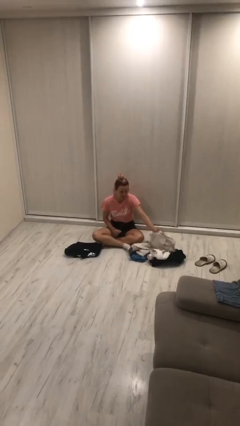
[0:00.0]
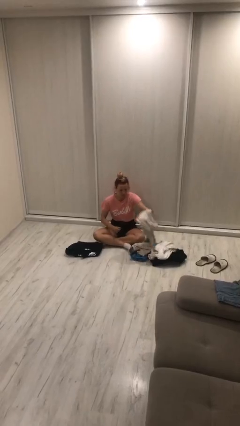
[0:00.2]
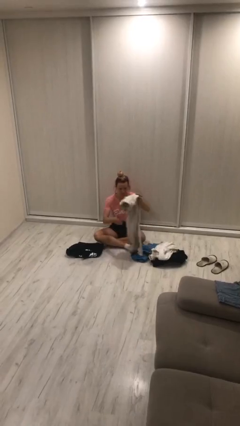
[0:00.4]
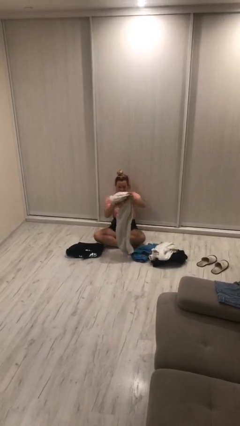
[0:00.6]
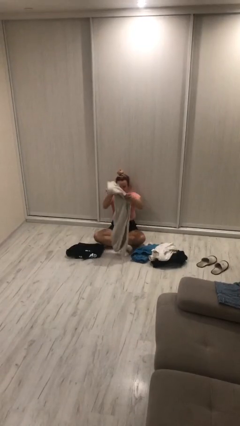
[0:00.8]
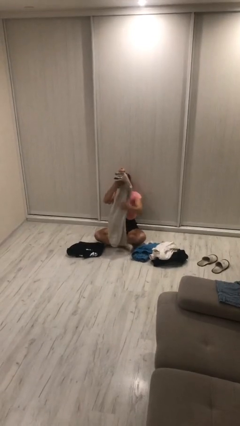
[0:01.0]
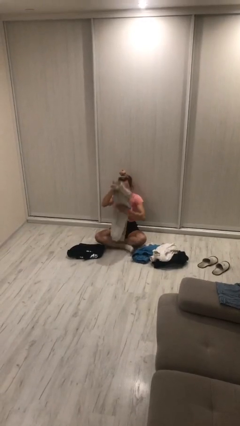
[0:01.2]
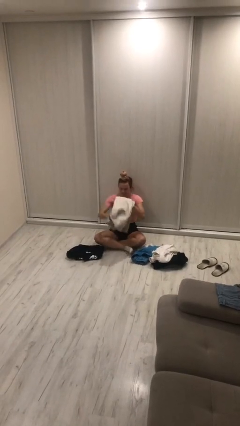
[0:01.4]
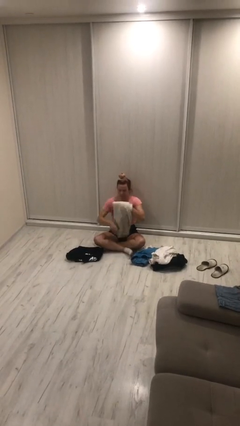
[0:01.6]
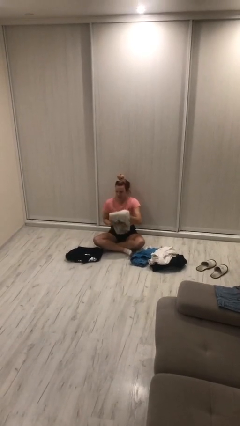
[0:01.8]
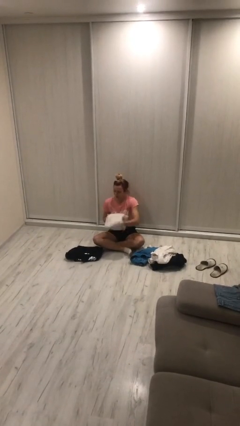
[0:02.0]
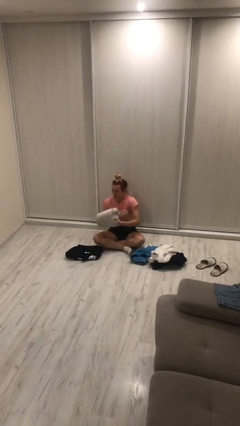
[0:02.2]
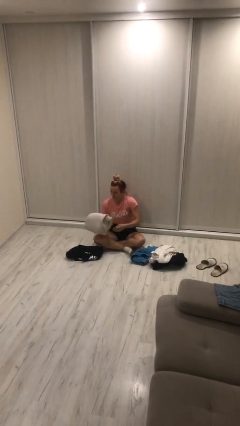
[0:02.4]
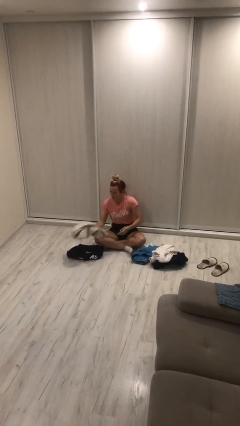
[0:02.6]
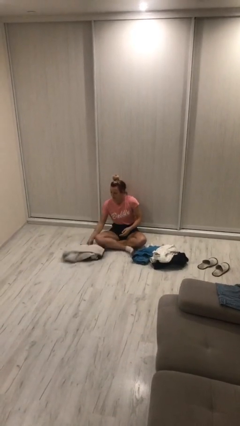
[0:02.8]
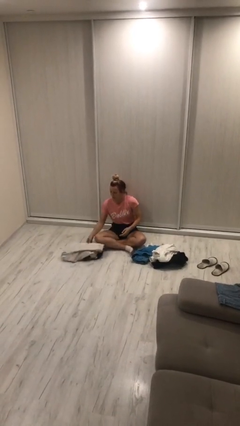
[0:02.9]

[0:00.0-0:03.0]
person folds pants

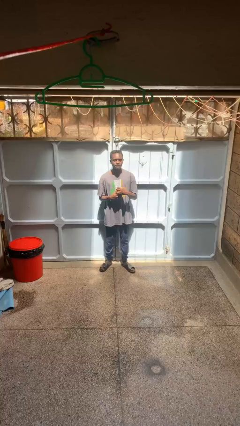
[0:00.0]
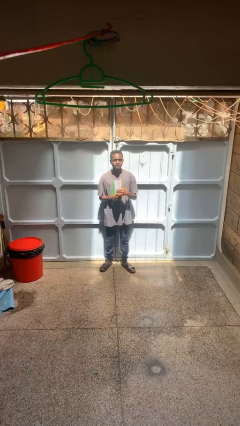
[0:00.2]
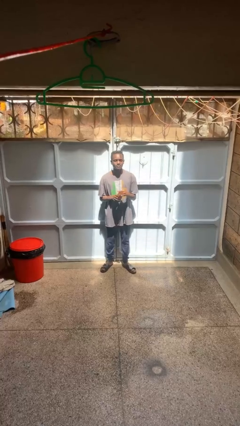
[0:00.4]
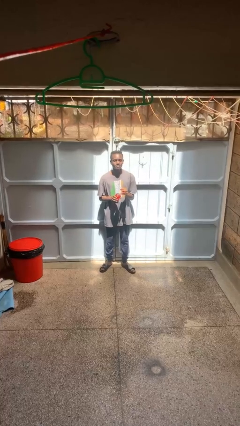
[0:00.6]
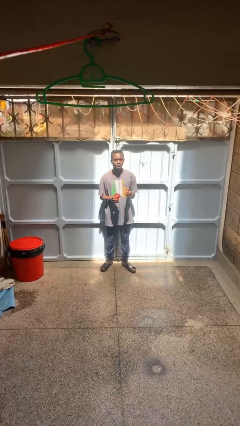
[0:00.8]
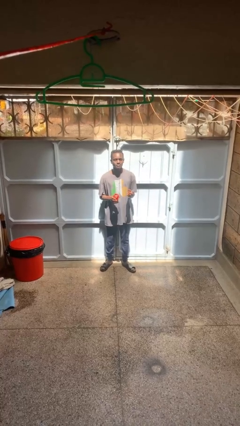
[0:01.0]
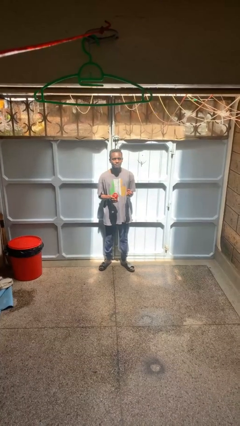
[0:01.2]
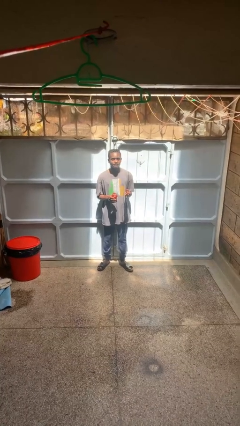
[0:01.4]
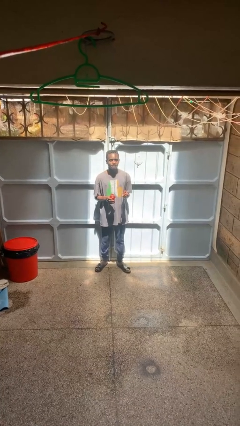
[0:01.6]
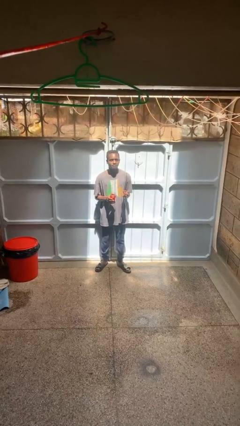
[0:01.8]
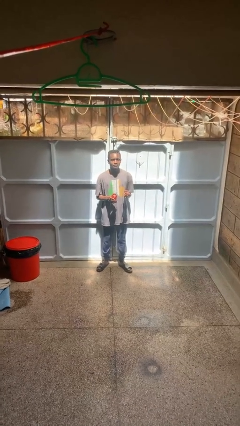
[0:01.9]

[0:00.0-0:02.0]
person opens jar

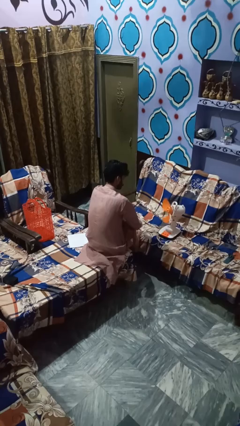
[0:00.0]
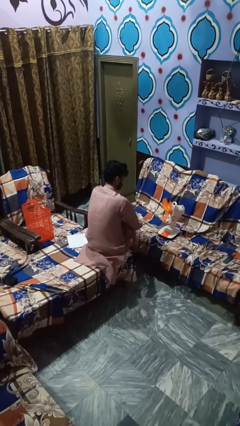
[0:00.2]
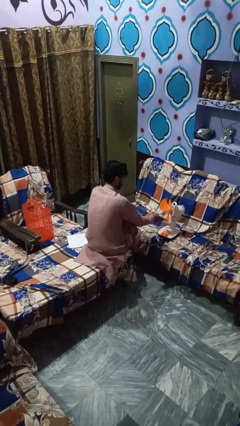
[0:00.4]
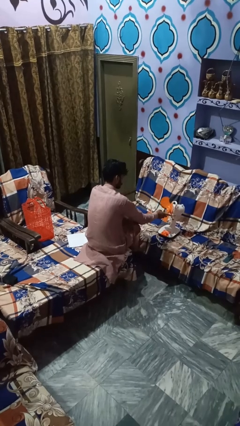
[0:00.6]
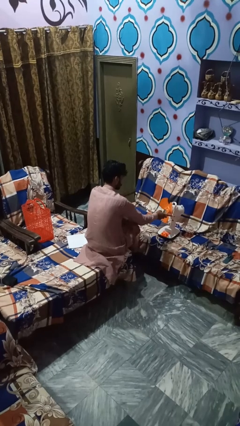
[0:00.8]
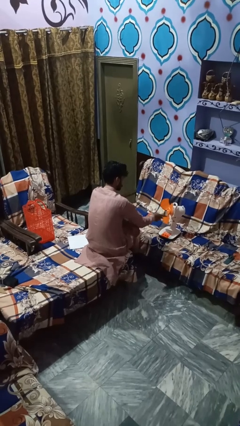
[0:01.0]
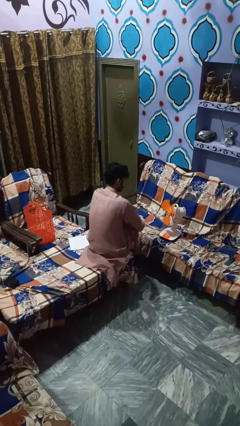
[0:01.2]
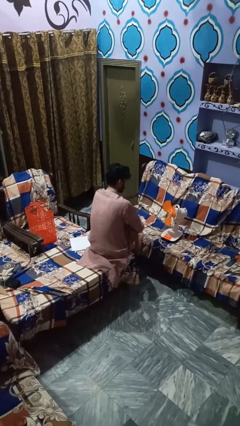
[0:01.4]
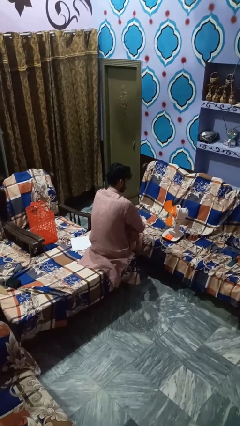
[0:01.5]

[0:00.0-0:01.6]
person turns off fan

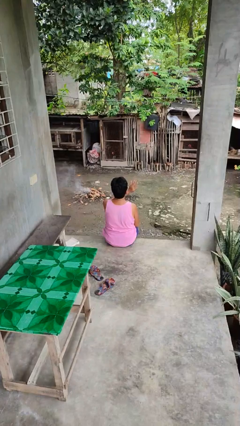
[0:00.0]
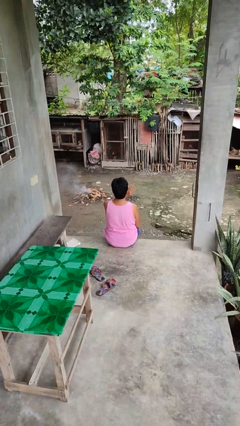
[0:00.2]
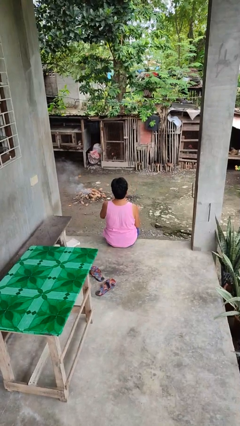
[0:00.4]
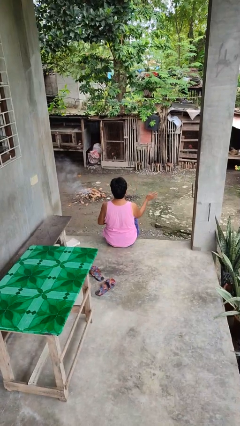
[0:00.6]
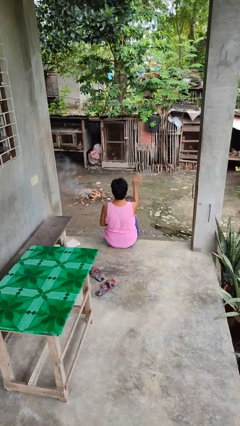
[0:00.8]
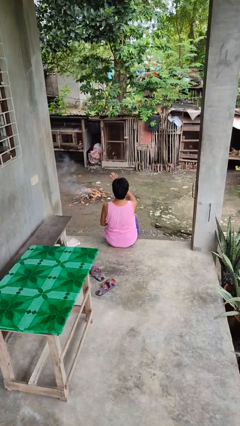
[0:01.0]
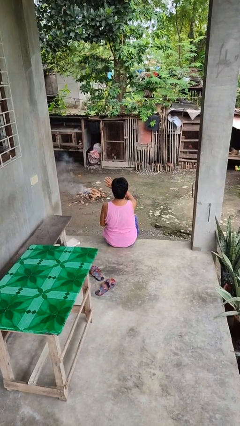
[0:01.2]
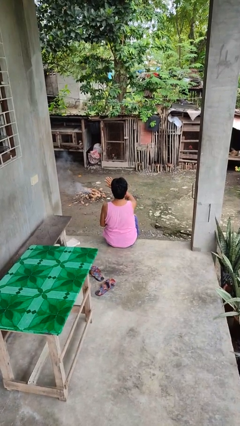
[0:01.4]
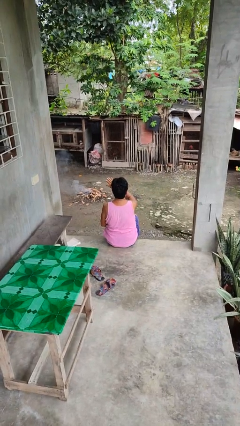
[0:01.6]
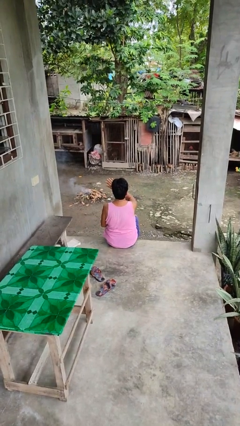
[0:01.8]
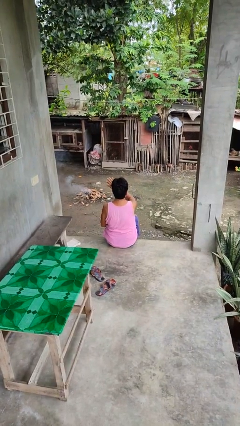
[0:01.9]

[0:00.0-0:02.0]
person gestures swipe left

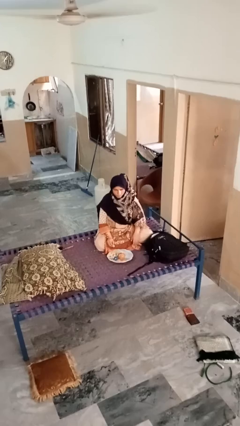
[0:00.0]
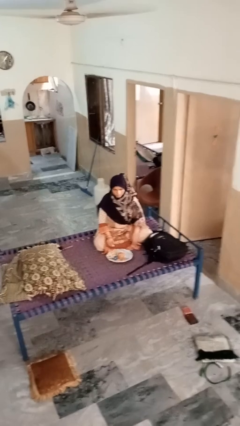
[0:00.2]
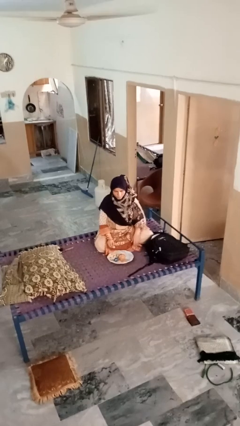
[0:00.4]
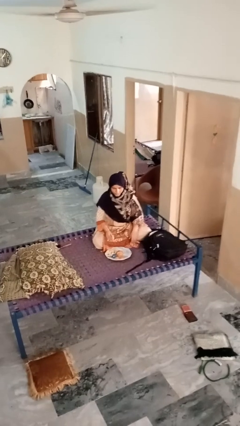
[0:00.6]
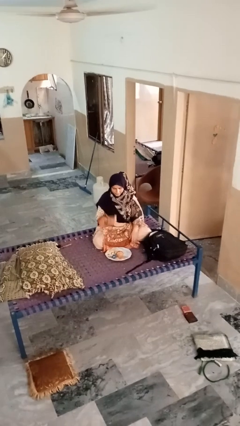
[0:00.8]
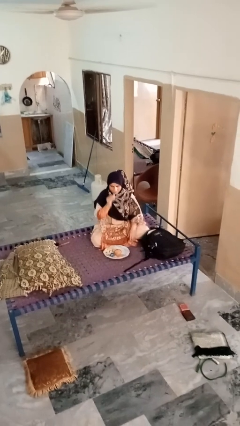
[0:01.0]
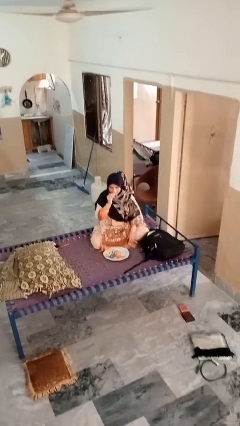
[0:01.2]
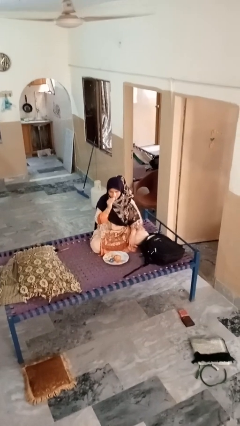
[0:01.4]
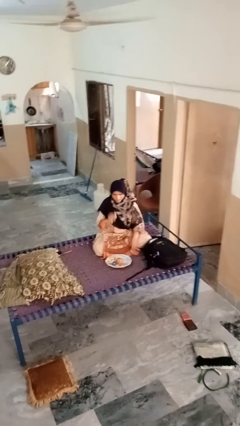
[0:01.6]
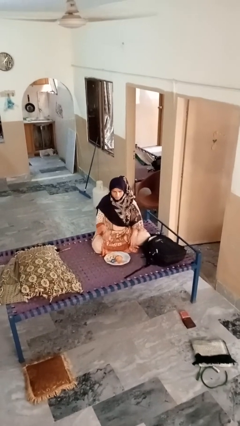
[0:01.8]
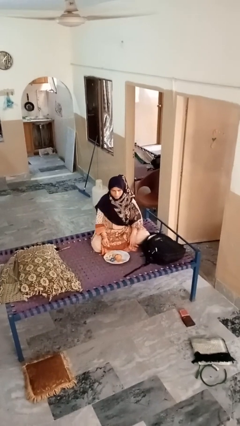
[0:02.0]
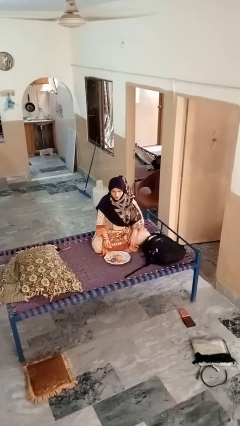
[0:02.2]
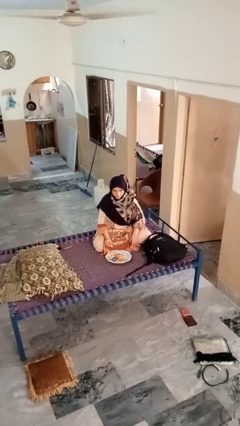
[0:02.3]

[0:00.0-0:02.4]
person eats apple

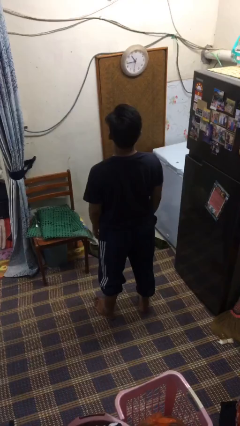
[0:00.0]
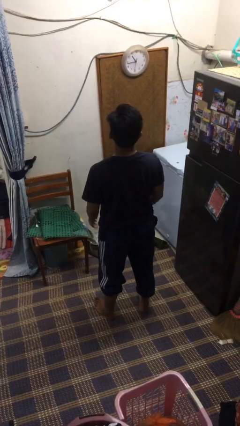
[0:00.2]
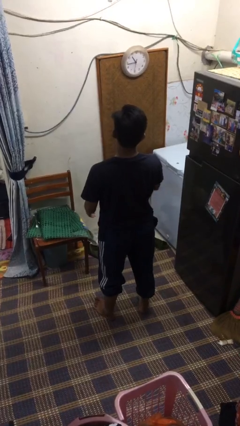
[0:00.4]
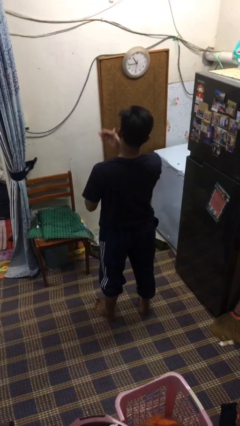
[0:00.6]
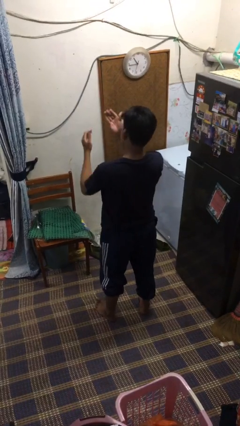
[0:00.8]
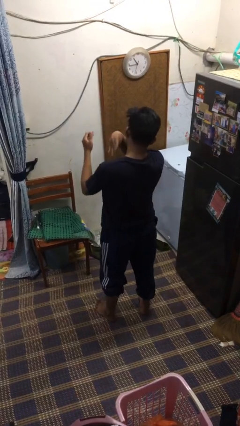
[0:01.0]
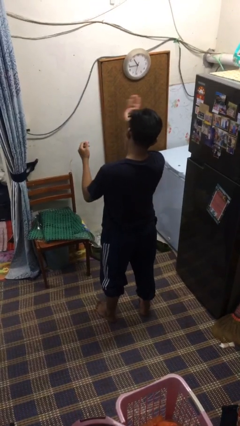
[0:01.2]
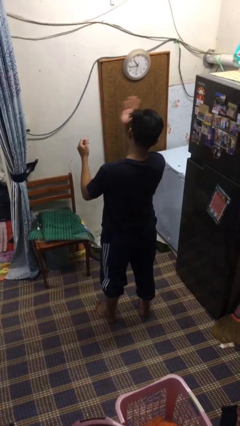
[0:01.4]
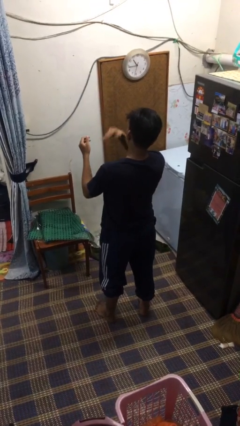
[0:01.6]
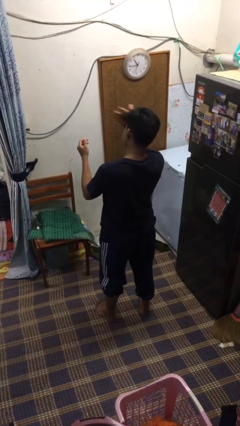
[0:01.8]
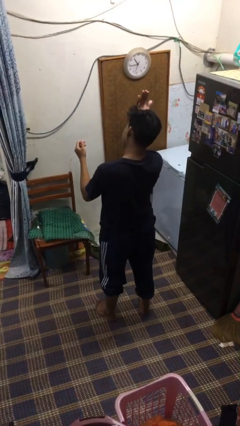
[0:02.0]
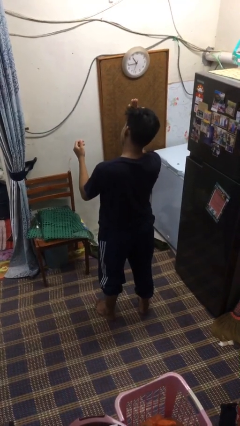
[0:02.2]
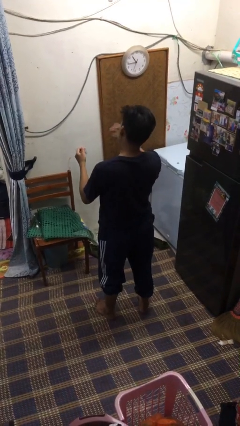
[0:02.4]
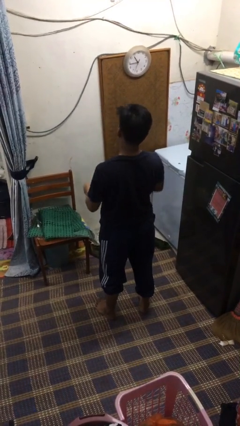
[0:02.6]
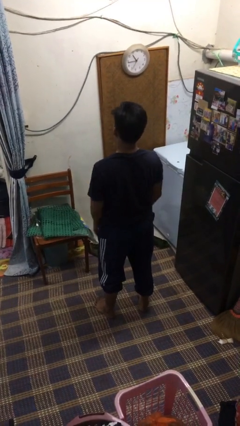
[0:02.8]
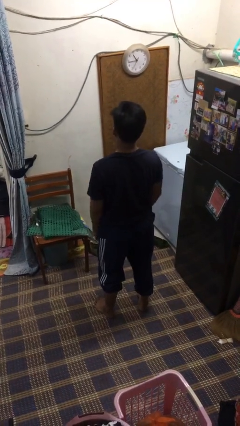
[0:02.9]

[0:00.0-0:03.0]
person swats bug

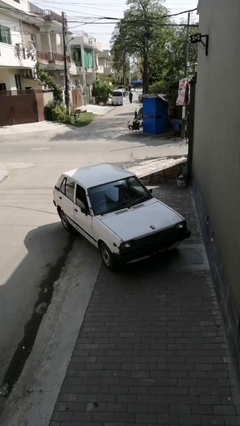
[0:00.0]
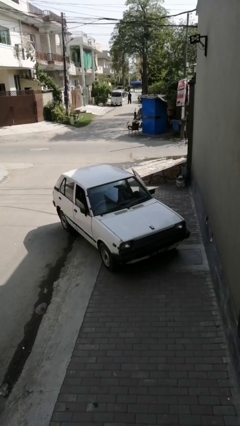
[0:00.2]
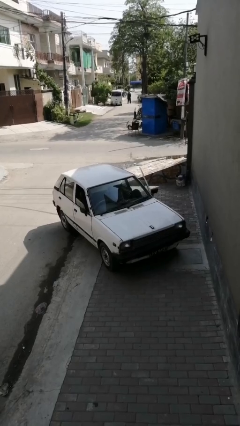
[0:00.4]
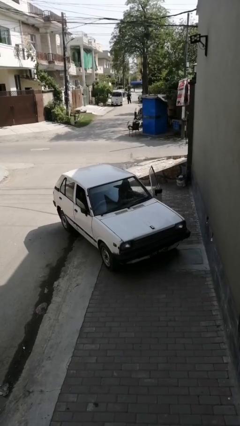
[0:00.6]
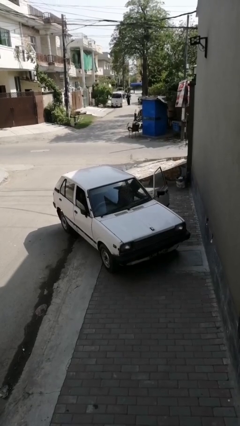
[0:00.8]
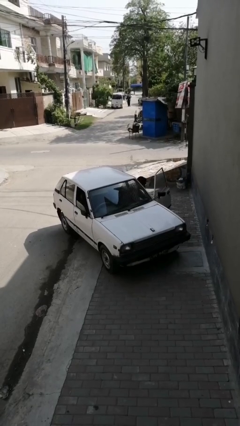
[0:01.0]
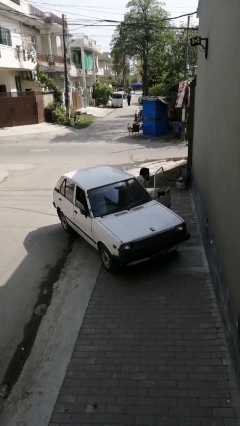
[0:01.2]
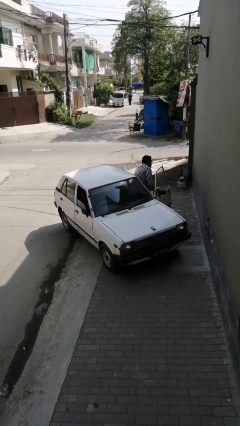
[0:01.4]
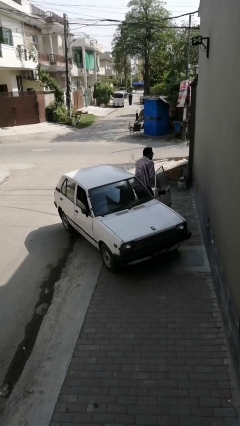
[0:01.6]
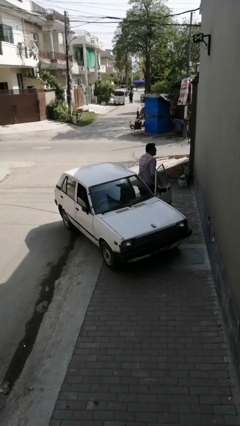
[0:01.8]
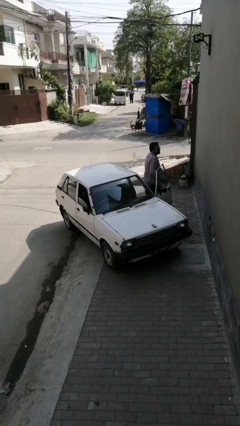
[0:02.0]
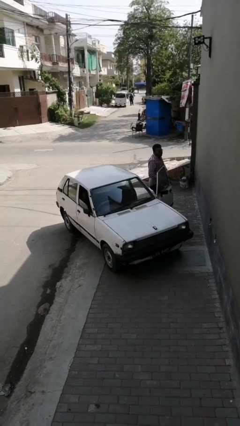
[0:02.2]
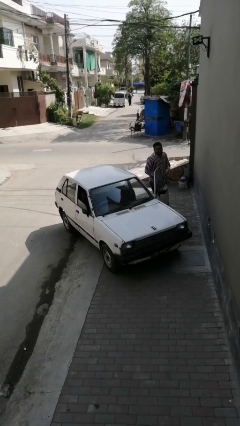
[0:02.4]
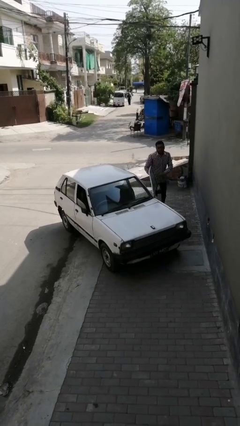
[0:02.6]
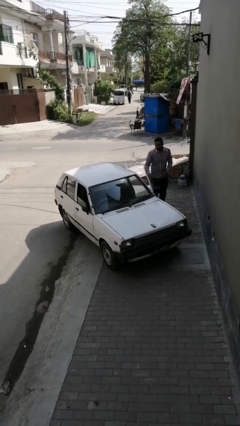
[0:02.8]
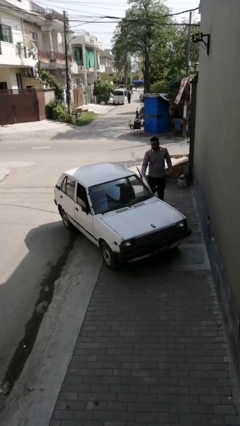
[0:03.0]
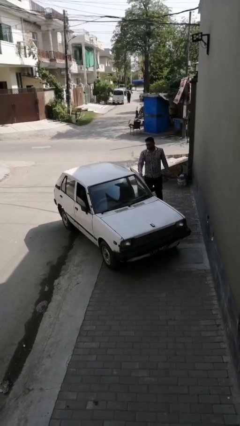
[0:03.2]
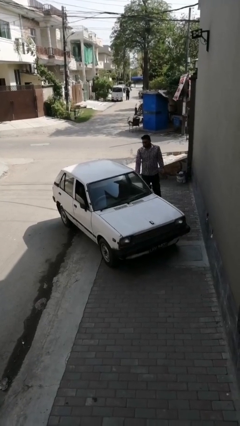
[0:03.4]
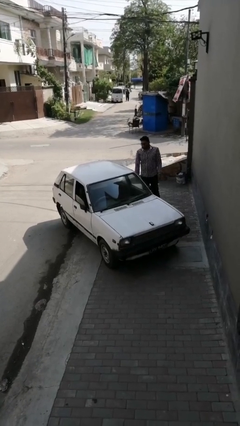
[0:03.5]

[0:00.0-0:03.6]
car drops off person
